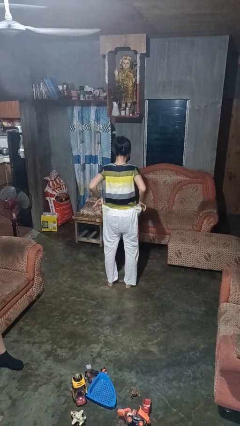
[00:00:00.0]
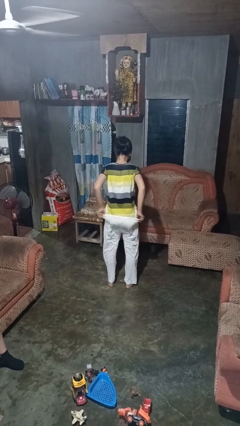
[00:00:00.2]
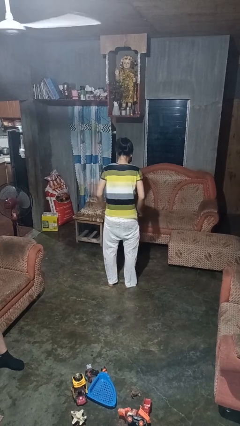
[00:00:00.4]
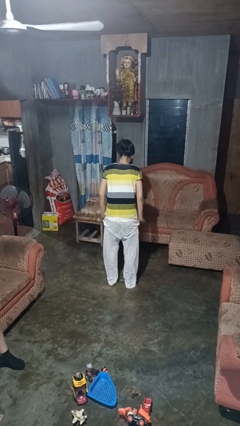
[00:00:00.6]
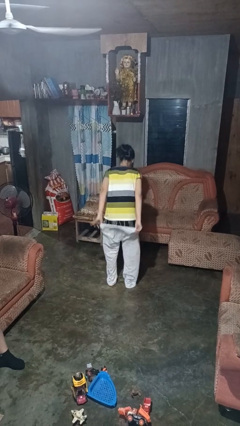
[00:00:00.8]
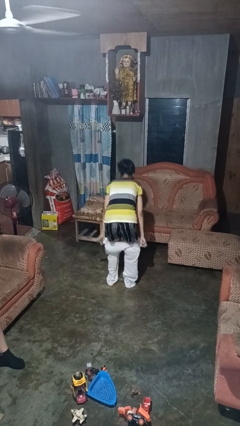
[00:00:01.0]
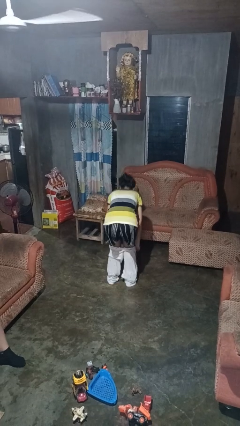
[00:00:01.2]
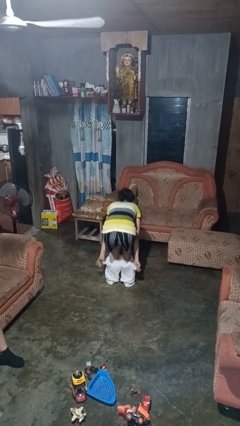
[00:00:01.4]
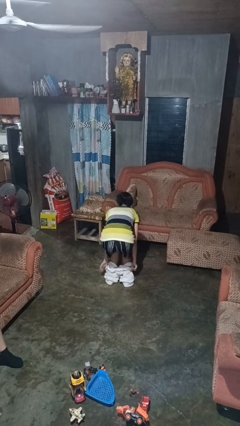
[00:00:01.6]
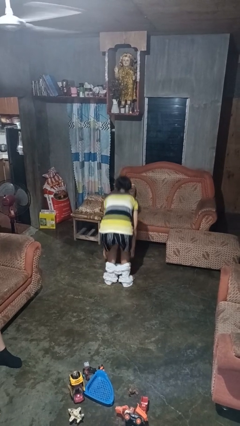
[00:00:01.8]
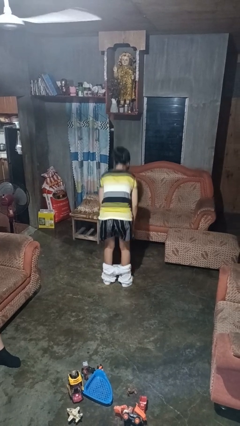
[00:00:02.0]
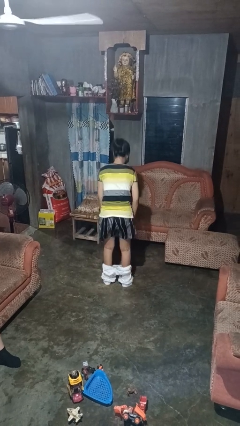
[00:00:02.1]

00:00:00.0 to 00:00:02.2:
person takes off pants

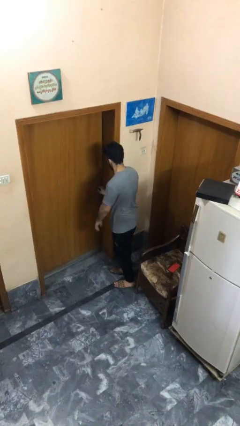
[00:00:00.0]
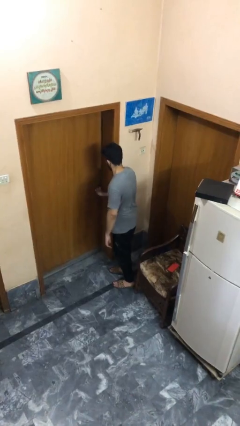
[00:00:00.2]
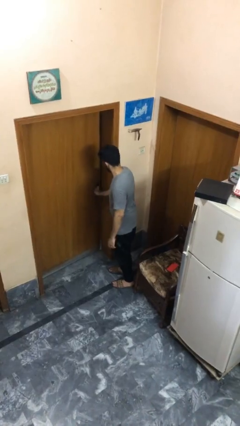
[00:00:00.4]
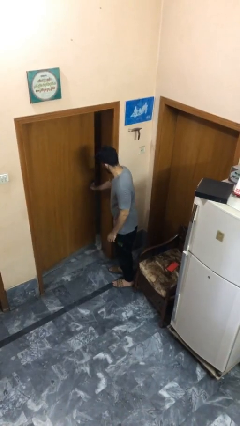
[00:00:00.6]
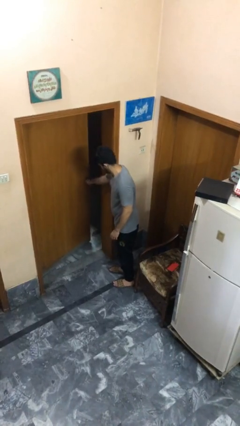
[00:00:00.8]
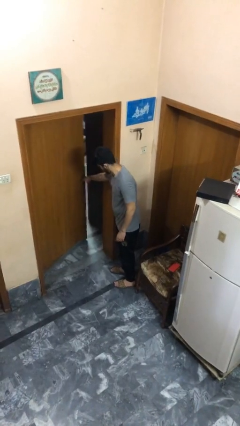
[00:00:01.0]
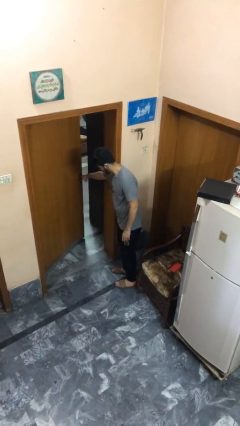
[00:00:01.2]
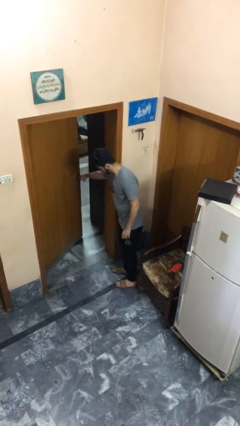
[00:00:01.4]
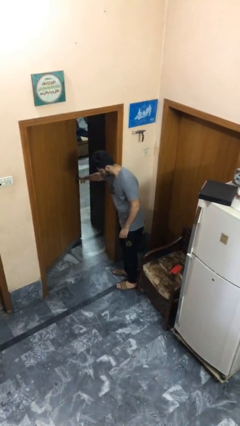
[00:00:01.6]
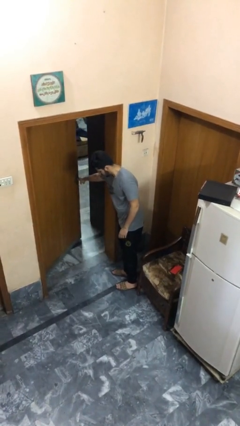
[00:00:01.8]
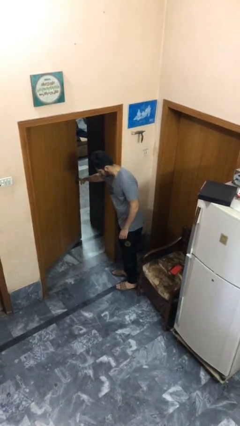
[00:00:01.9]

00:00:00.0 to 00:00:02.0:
person opens facility door

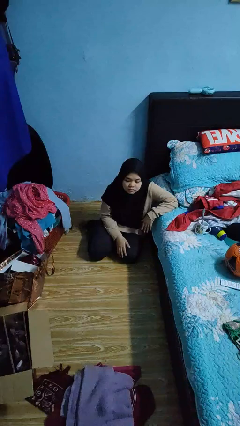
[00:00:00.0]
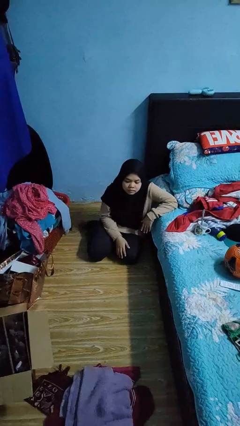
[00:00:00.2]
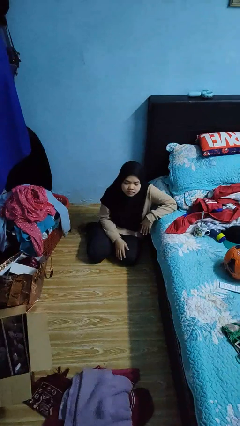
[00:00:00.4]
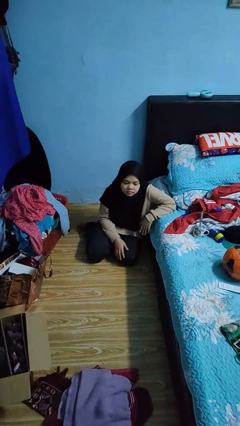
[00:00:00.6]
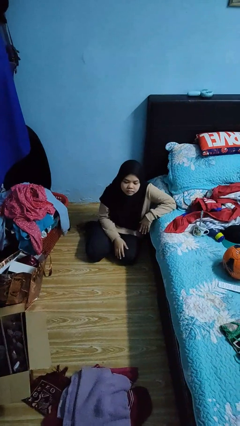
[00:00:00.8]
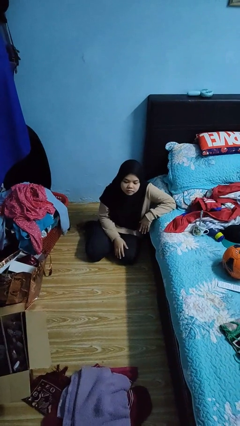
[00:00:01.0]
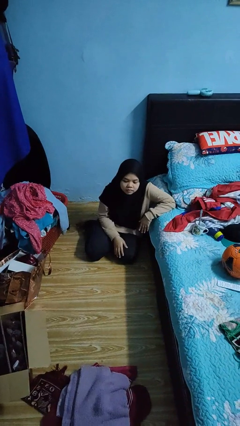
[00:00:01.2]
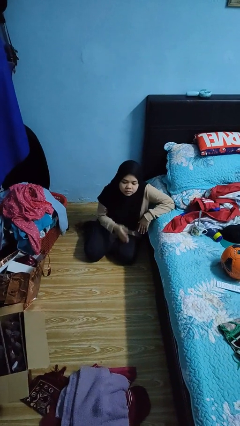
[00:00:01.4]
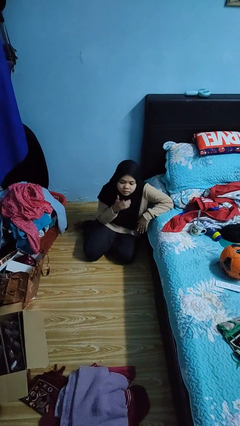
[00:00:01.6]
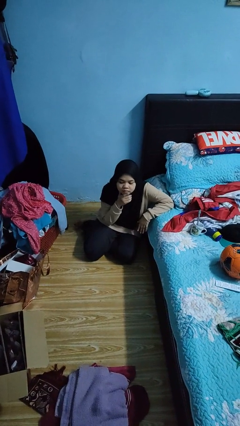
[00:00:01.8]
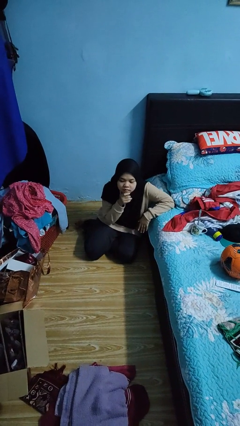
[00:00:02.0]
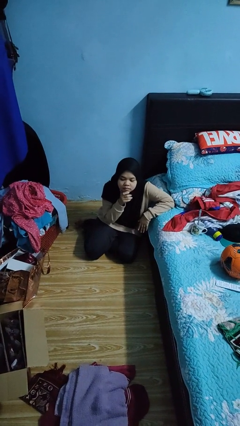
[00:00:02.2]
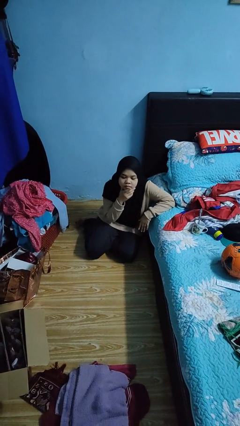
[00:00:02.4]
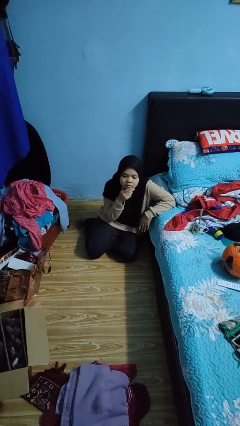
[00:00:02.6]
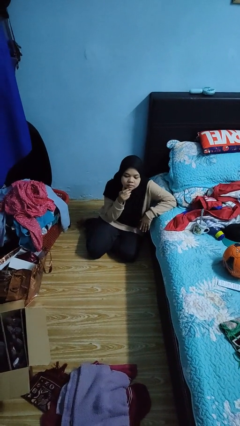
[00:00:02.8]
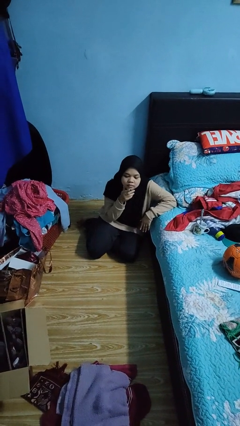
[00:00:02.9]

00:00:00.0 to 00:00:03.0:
person strokes chin

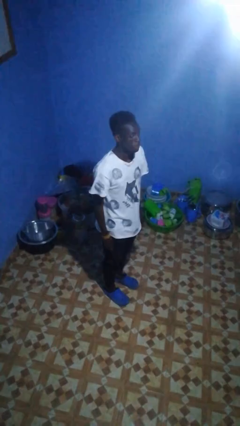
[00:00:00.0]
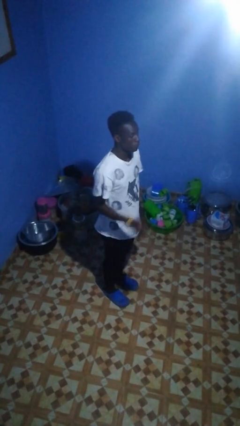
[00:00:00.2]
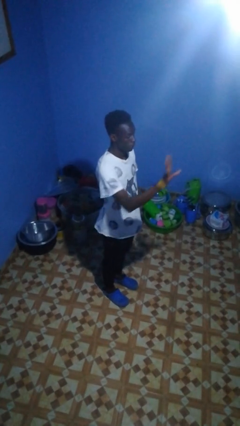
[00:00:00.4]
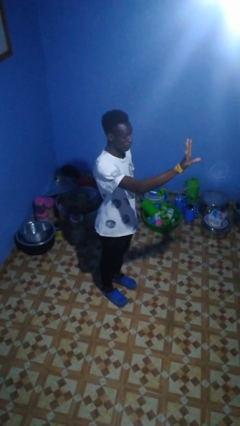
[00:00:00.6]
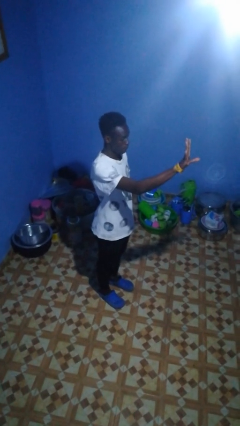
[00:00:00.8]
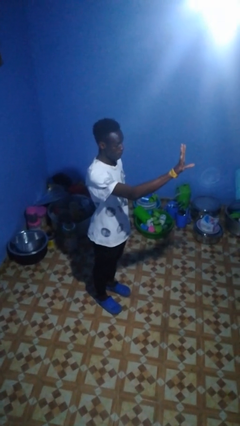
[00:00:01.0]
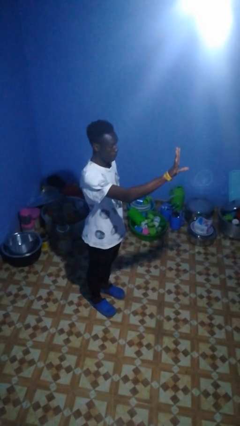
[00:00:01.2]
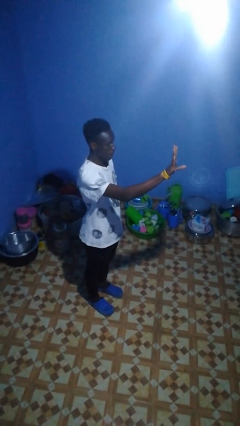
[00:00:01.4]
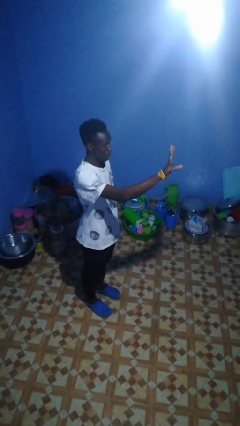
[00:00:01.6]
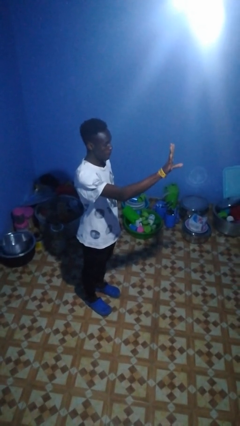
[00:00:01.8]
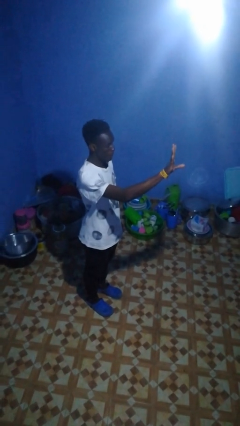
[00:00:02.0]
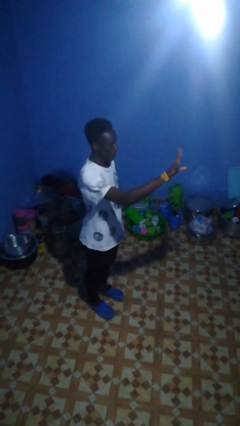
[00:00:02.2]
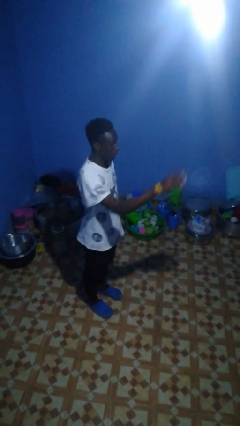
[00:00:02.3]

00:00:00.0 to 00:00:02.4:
person gestures number five

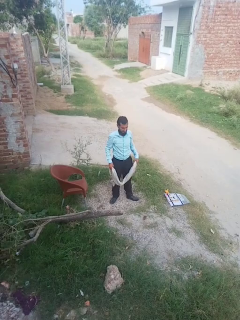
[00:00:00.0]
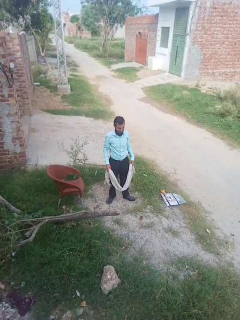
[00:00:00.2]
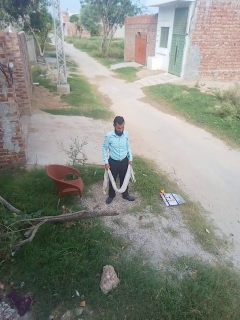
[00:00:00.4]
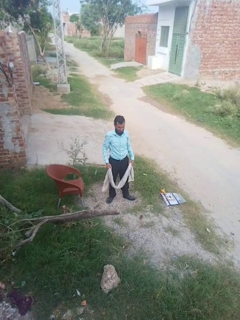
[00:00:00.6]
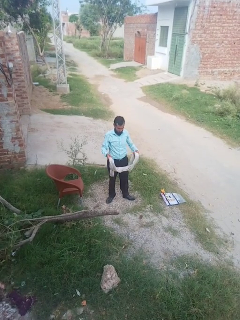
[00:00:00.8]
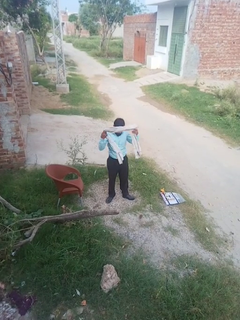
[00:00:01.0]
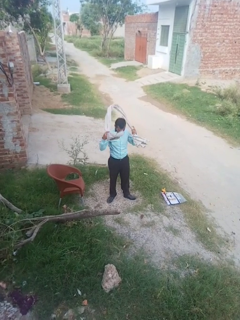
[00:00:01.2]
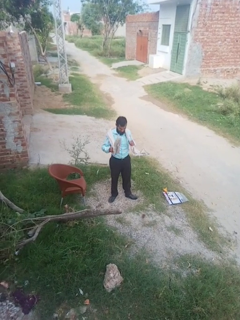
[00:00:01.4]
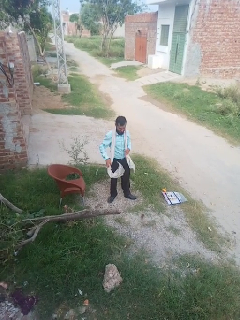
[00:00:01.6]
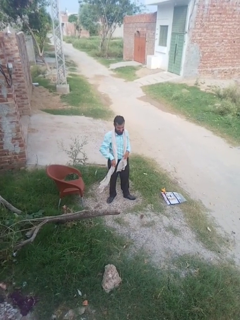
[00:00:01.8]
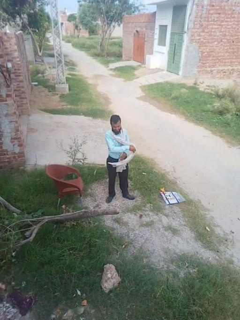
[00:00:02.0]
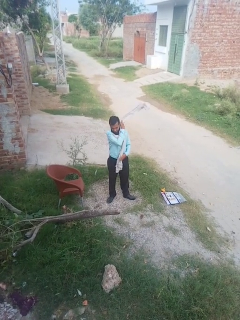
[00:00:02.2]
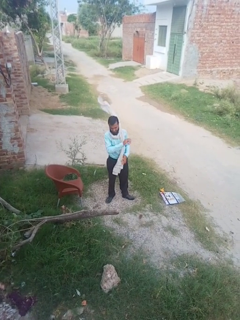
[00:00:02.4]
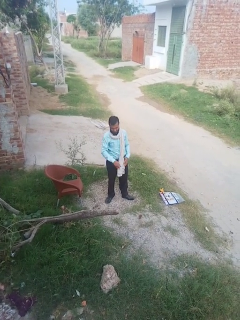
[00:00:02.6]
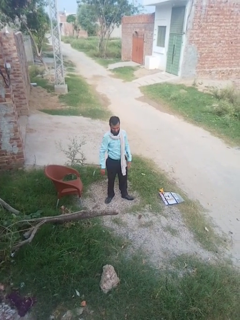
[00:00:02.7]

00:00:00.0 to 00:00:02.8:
person puts on scarf

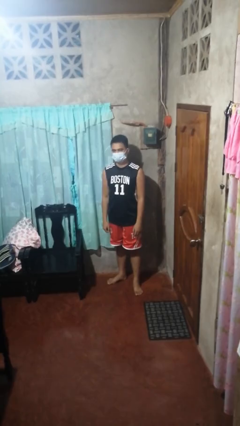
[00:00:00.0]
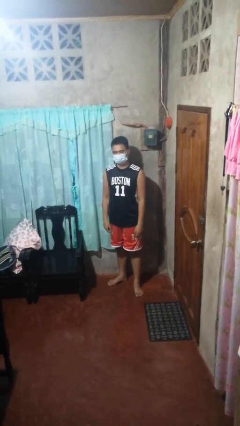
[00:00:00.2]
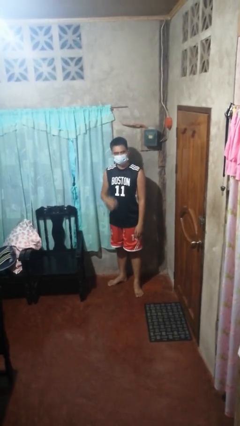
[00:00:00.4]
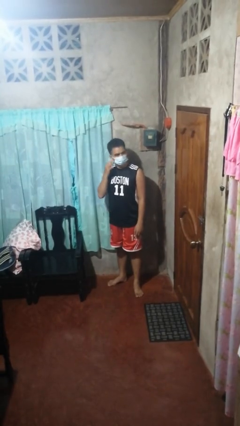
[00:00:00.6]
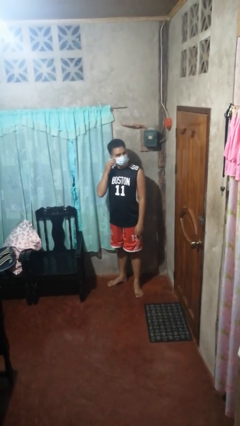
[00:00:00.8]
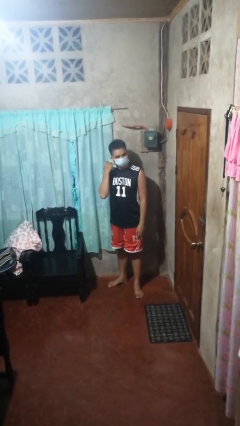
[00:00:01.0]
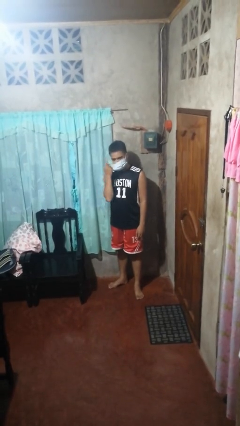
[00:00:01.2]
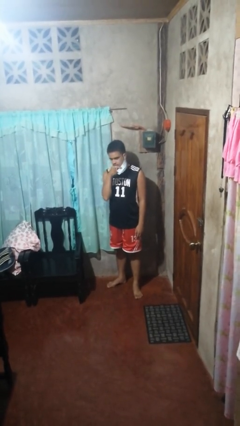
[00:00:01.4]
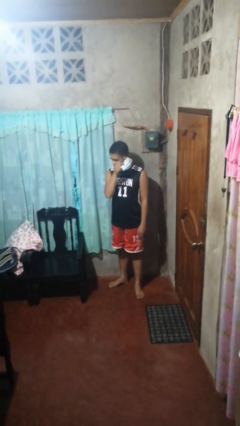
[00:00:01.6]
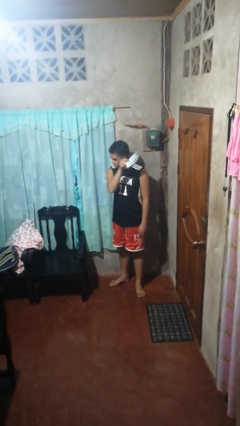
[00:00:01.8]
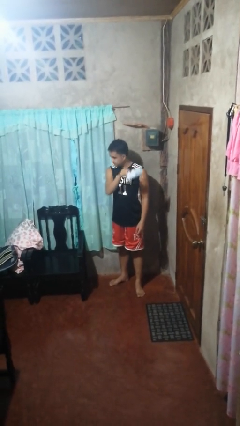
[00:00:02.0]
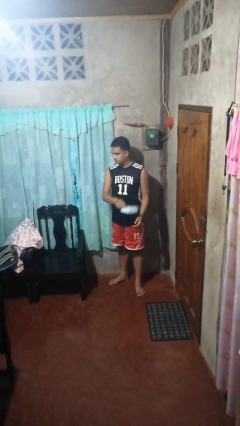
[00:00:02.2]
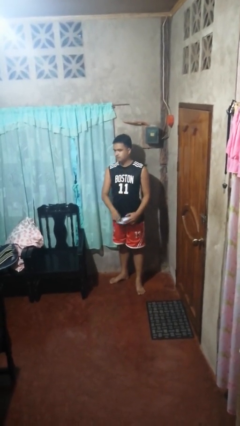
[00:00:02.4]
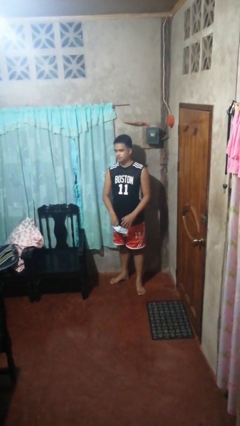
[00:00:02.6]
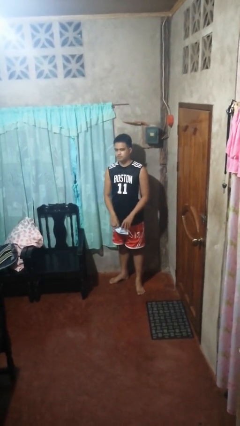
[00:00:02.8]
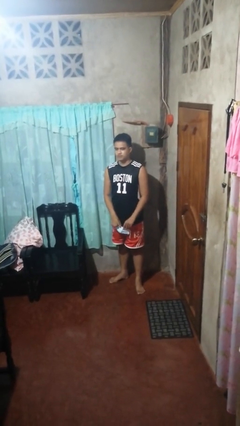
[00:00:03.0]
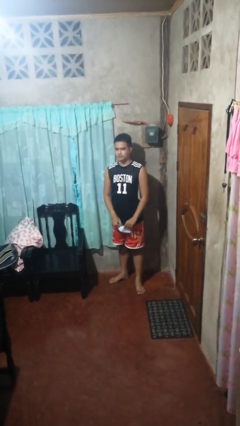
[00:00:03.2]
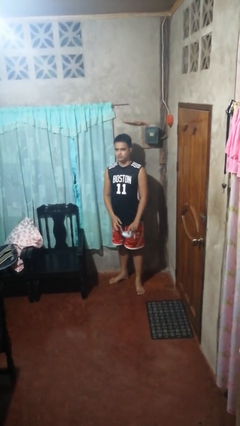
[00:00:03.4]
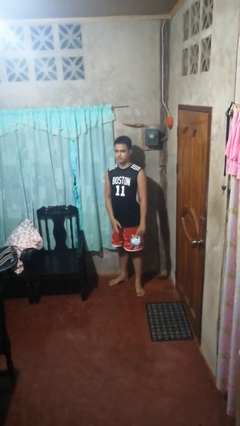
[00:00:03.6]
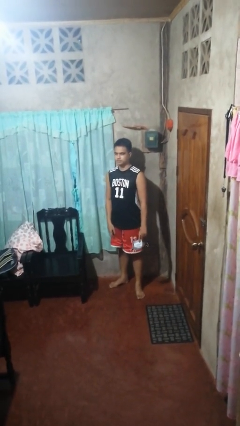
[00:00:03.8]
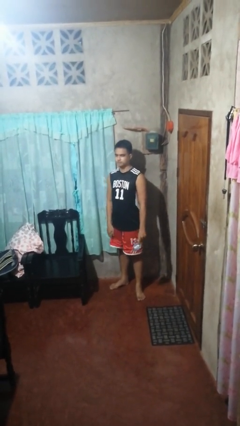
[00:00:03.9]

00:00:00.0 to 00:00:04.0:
person takes off facemask

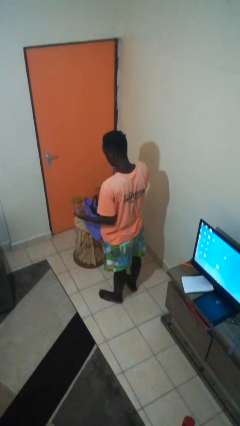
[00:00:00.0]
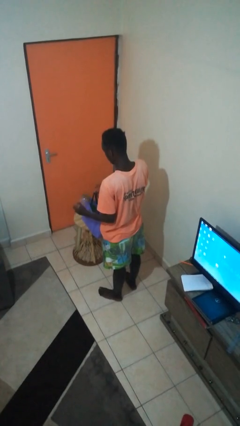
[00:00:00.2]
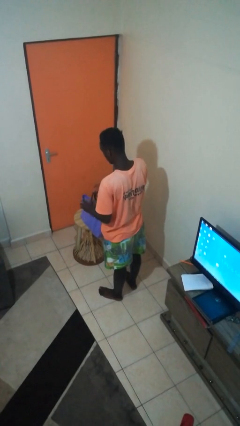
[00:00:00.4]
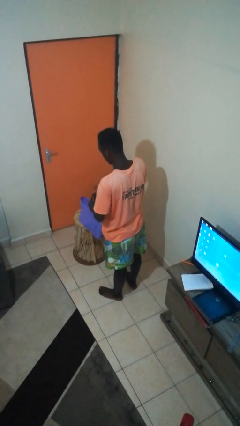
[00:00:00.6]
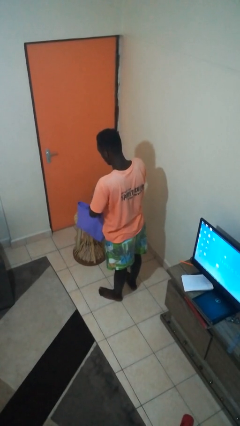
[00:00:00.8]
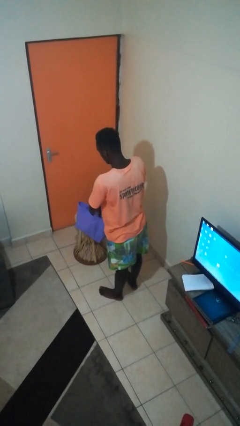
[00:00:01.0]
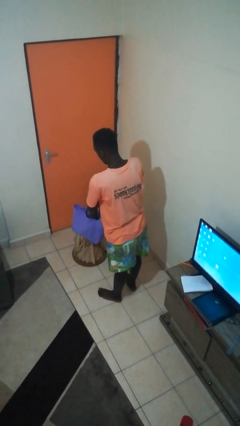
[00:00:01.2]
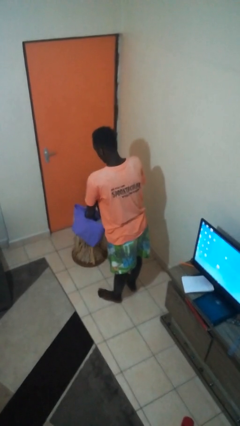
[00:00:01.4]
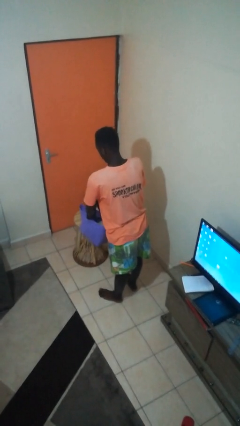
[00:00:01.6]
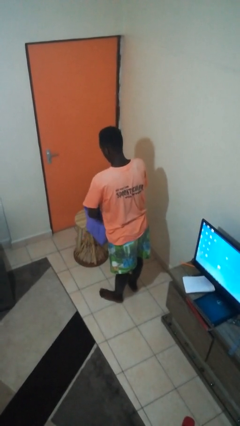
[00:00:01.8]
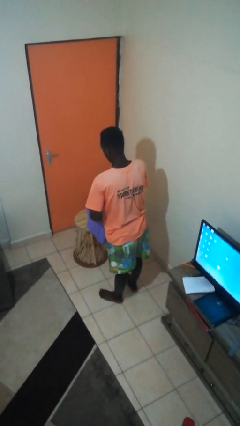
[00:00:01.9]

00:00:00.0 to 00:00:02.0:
person puts object into bag
